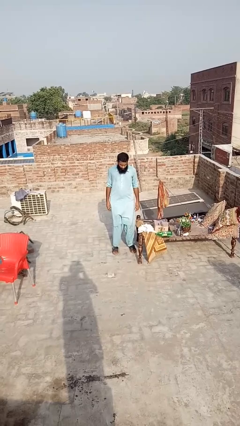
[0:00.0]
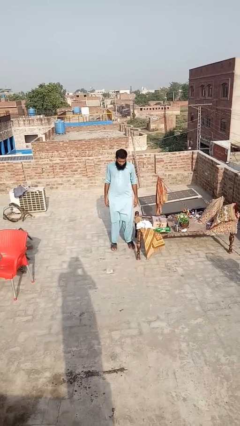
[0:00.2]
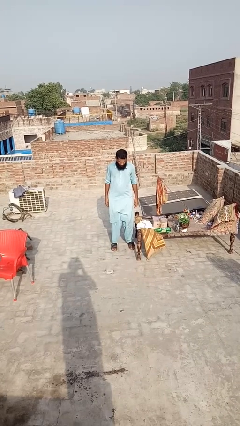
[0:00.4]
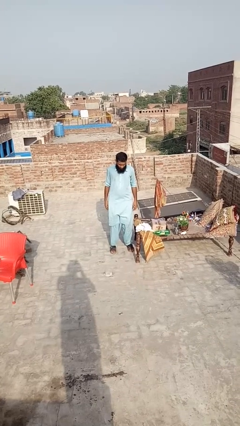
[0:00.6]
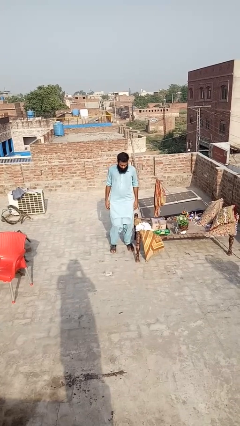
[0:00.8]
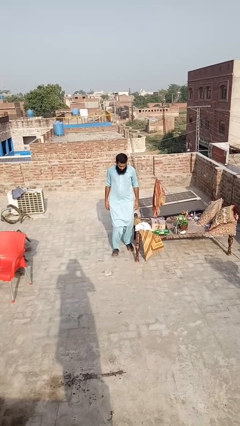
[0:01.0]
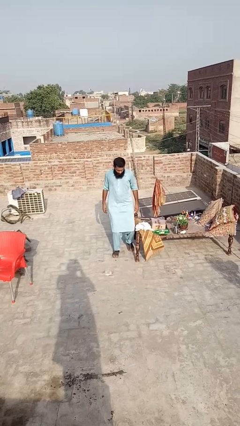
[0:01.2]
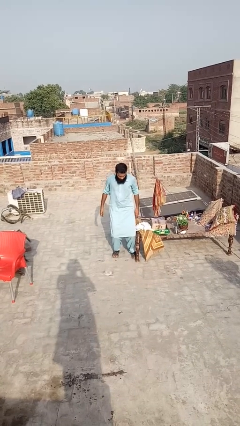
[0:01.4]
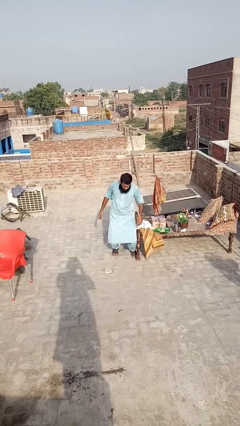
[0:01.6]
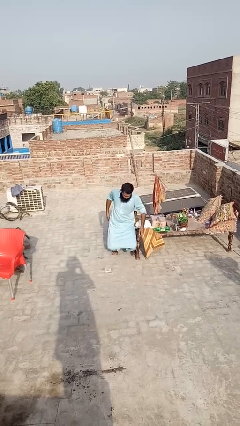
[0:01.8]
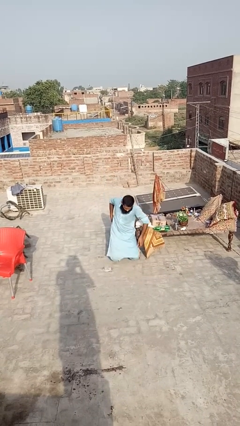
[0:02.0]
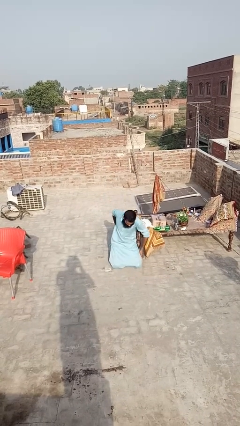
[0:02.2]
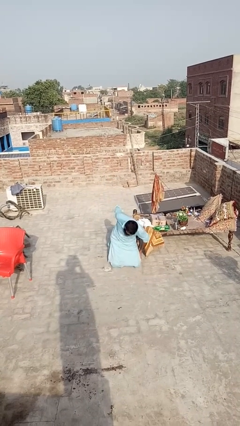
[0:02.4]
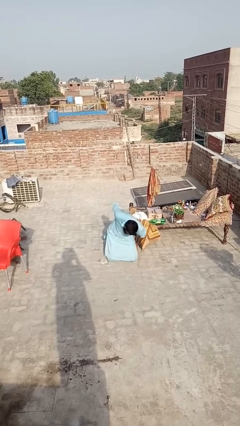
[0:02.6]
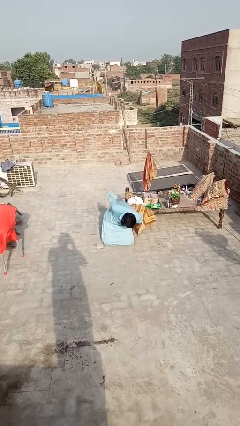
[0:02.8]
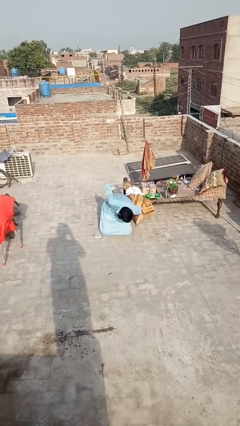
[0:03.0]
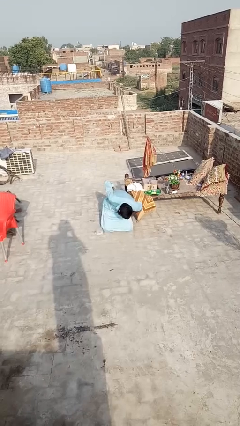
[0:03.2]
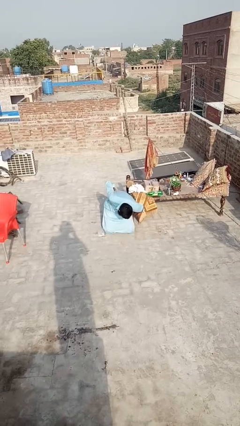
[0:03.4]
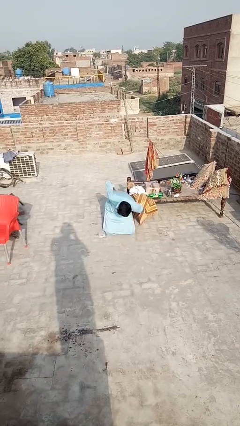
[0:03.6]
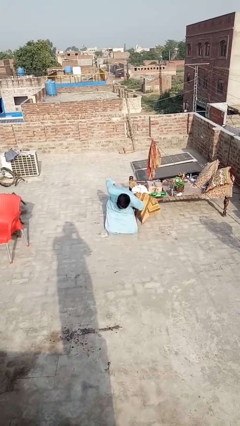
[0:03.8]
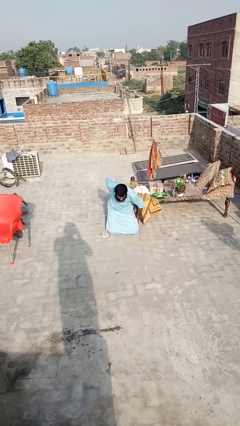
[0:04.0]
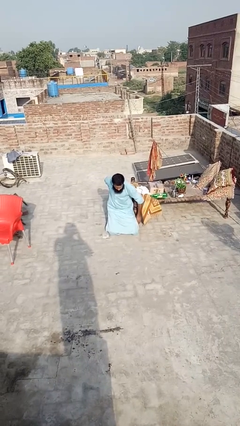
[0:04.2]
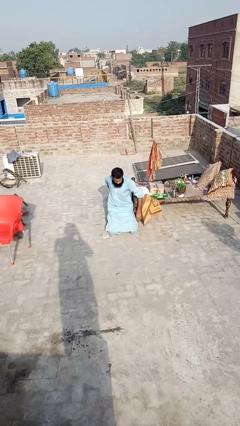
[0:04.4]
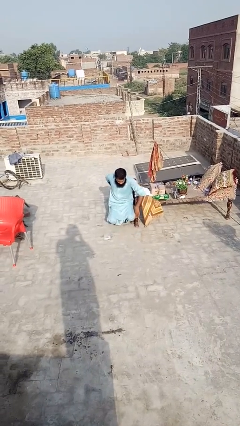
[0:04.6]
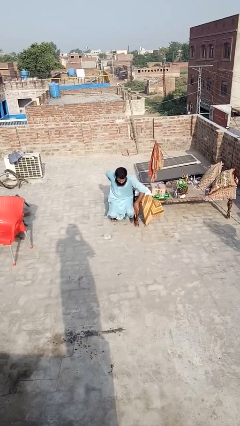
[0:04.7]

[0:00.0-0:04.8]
person bumps into table

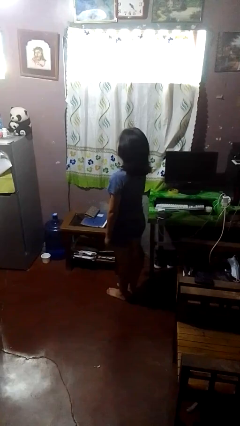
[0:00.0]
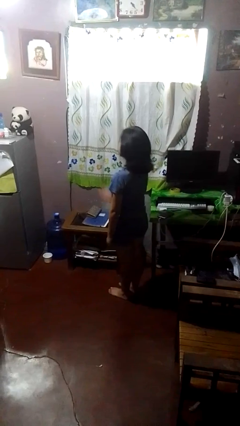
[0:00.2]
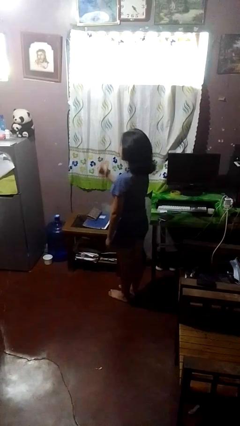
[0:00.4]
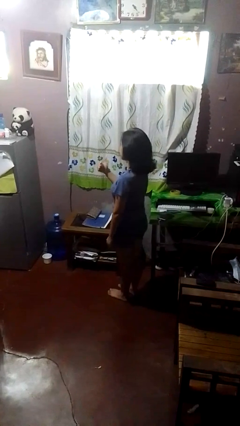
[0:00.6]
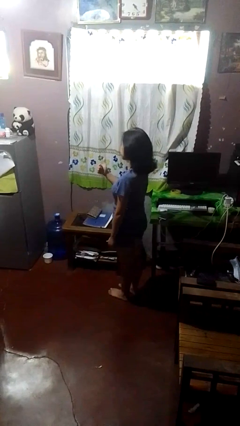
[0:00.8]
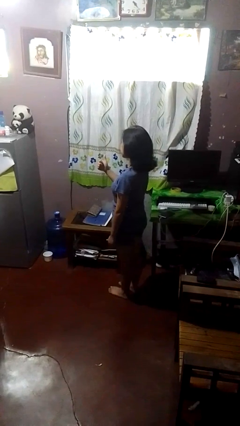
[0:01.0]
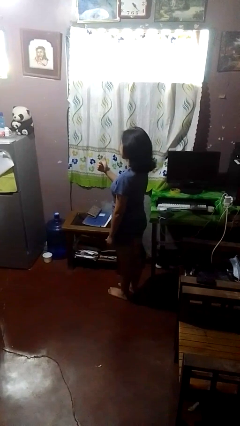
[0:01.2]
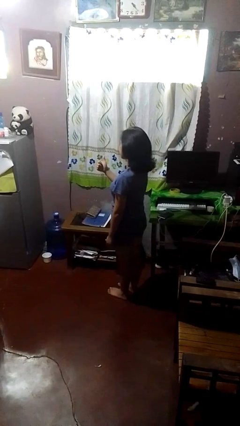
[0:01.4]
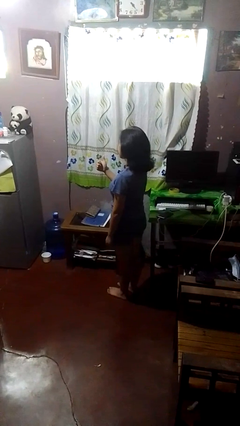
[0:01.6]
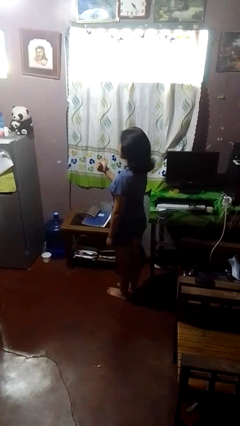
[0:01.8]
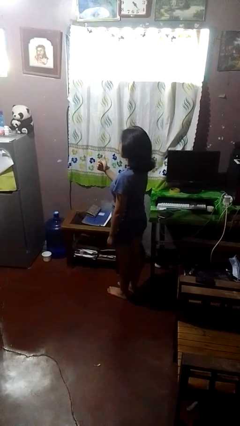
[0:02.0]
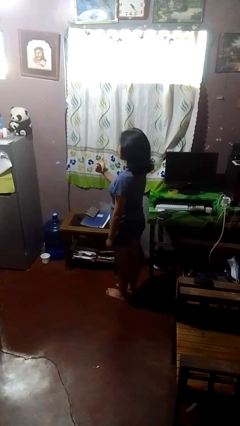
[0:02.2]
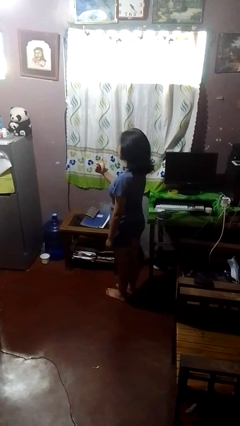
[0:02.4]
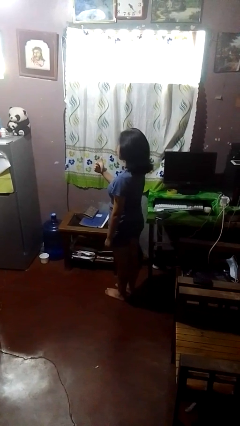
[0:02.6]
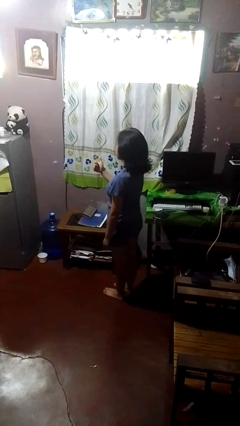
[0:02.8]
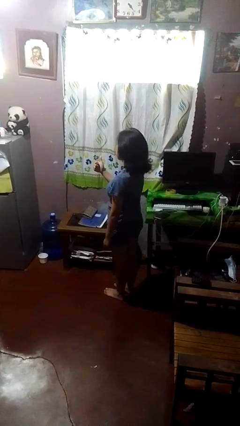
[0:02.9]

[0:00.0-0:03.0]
person gestures thumbs up

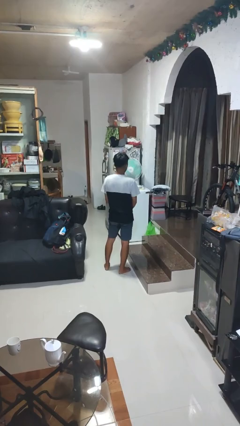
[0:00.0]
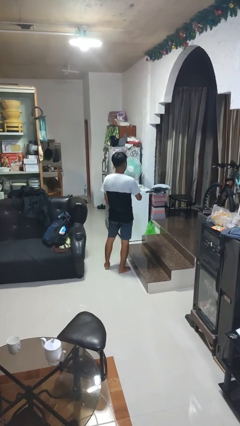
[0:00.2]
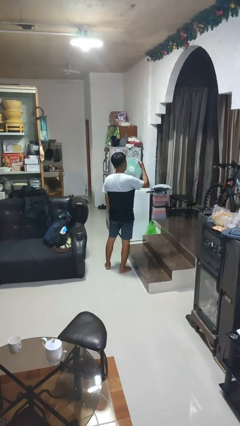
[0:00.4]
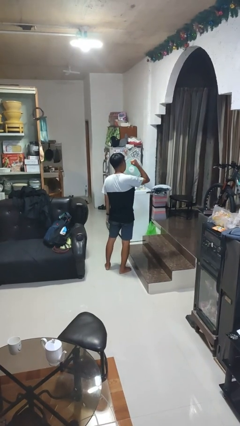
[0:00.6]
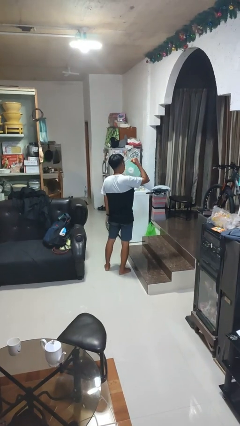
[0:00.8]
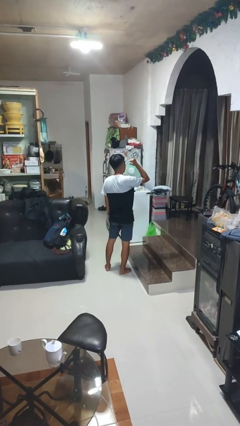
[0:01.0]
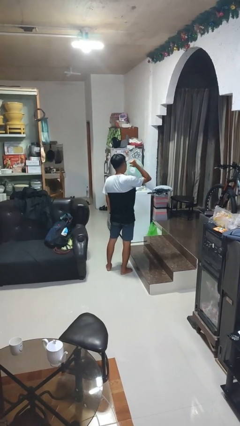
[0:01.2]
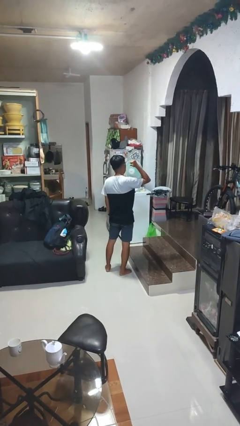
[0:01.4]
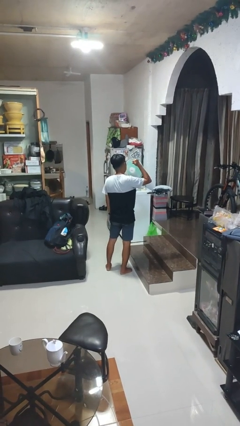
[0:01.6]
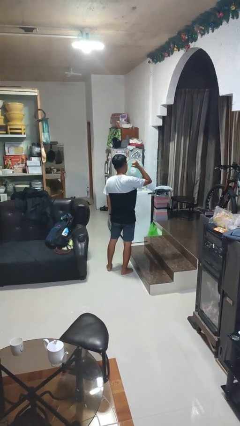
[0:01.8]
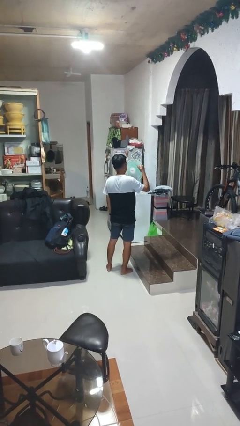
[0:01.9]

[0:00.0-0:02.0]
person gestures behind me

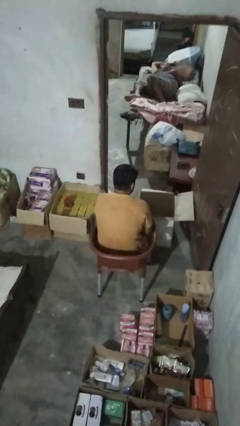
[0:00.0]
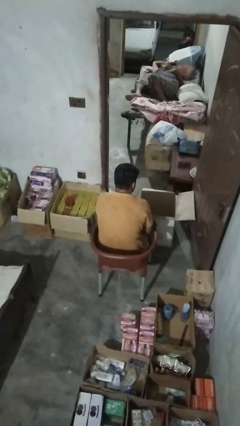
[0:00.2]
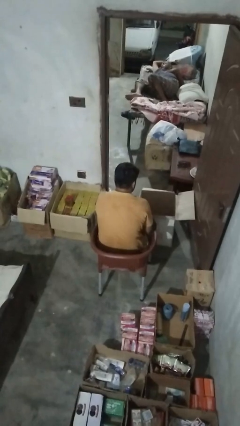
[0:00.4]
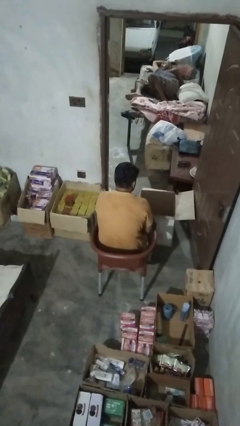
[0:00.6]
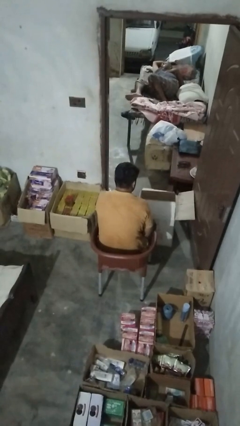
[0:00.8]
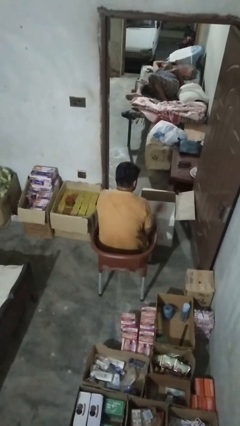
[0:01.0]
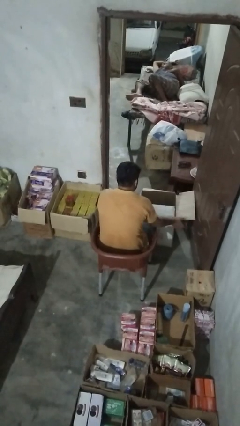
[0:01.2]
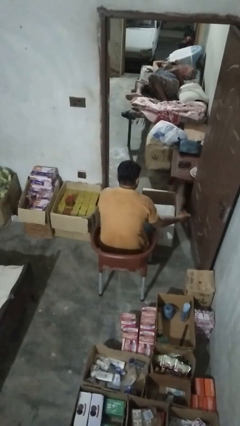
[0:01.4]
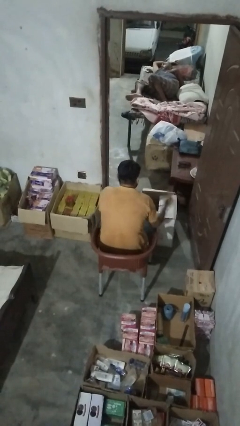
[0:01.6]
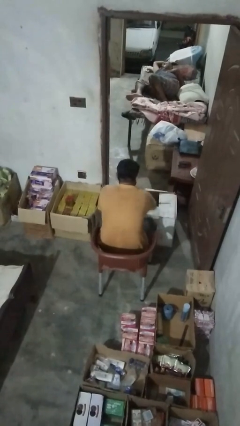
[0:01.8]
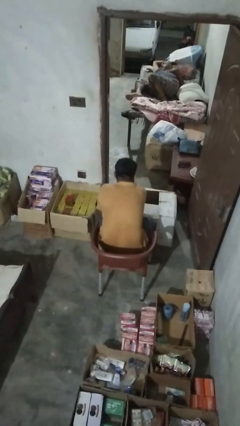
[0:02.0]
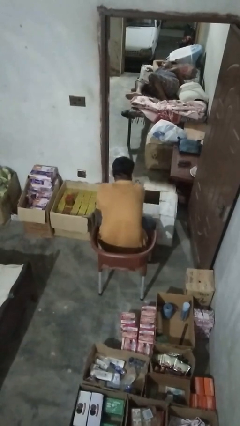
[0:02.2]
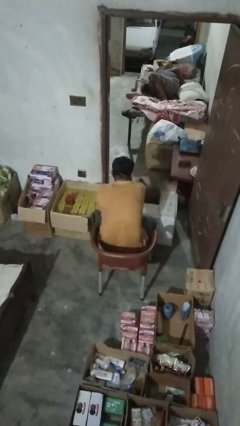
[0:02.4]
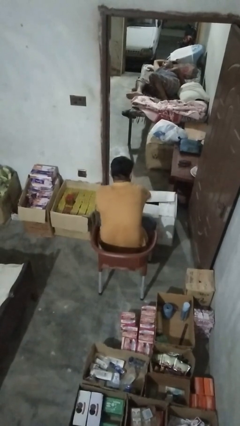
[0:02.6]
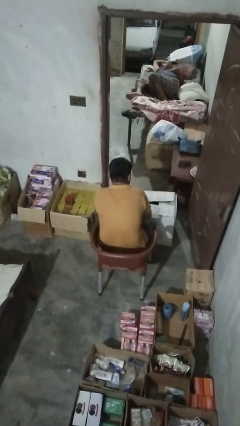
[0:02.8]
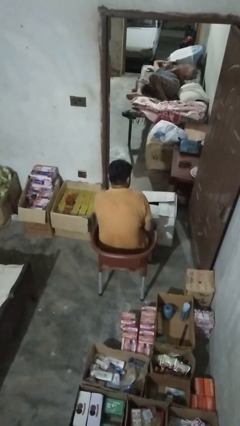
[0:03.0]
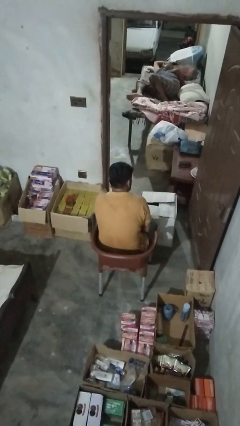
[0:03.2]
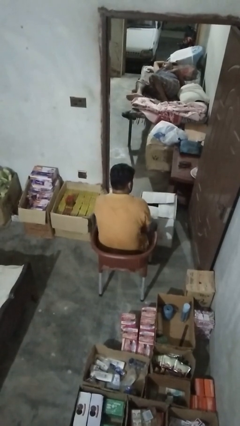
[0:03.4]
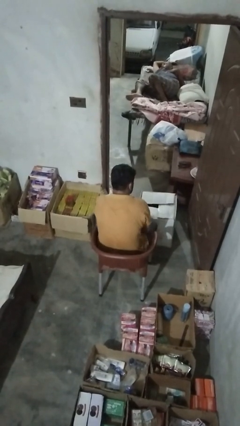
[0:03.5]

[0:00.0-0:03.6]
person opens box

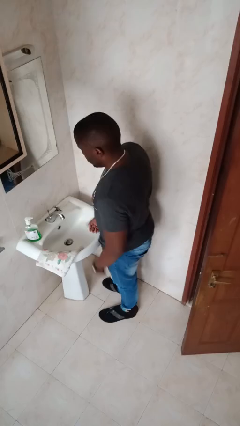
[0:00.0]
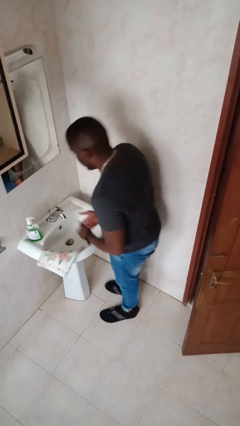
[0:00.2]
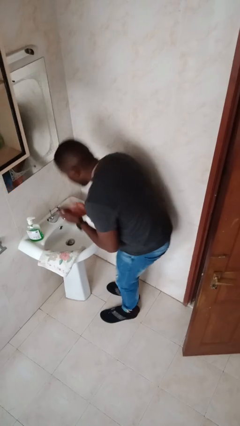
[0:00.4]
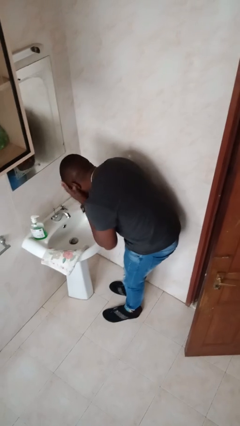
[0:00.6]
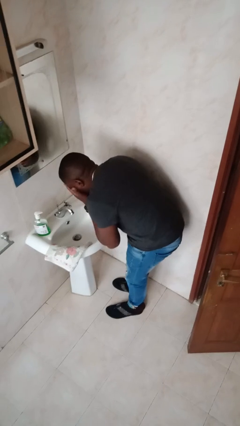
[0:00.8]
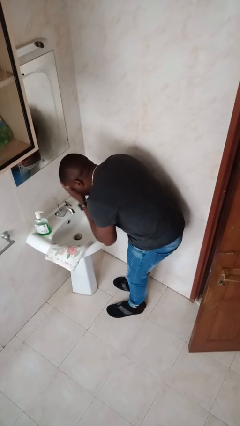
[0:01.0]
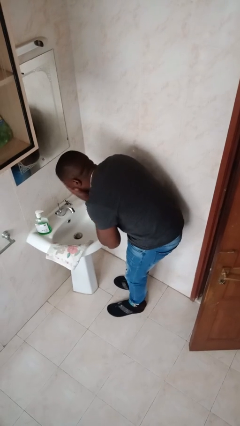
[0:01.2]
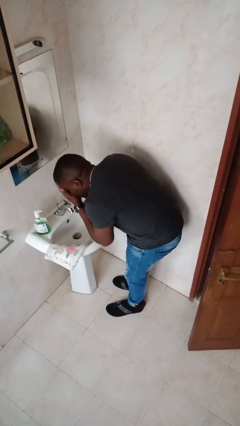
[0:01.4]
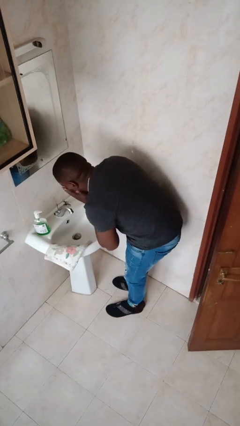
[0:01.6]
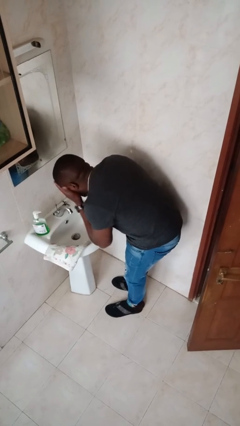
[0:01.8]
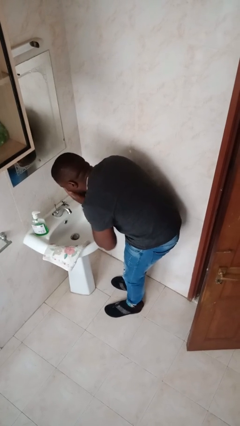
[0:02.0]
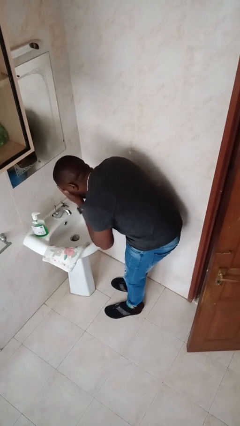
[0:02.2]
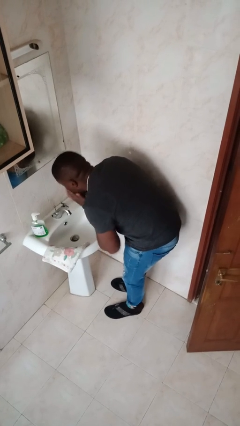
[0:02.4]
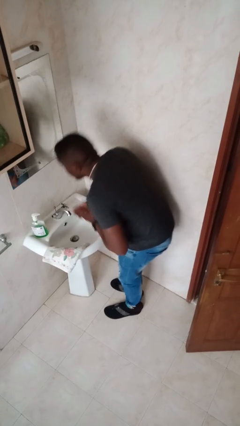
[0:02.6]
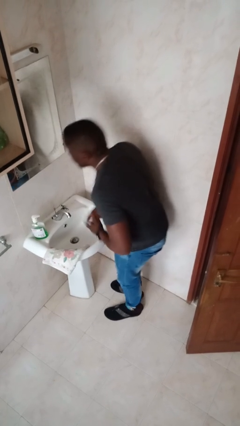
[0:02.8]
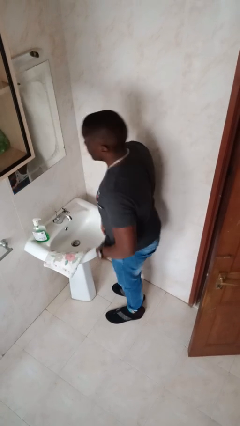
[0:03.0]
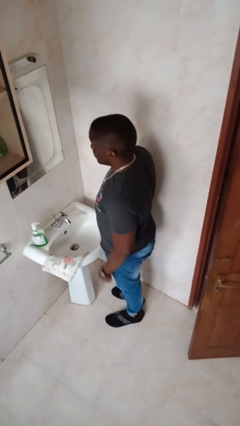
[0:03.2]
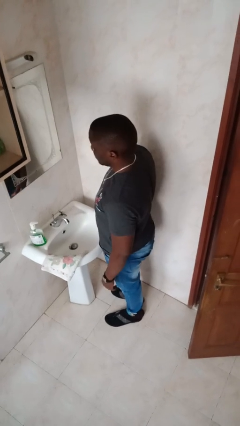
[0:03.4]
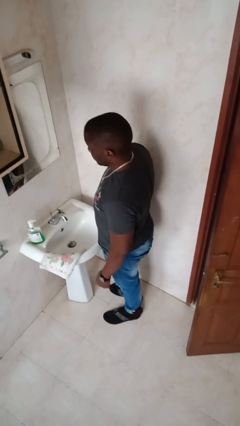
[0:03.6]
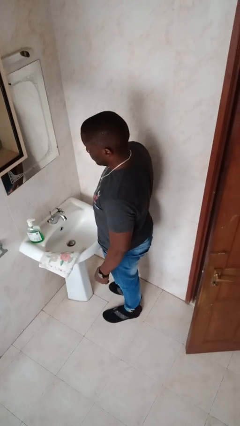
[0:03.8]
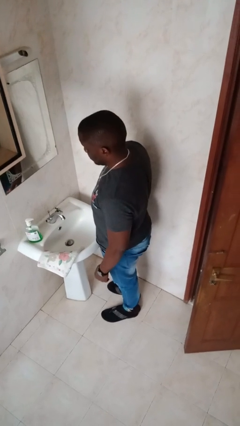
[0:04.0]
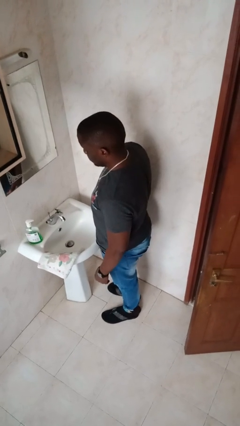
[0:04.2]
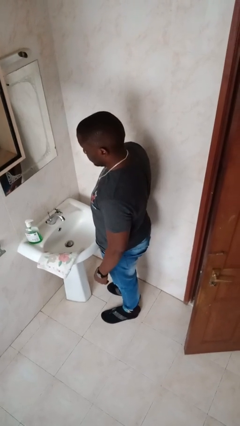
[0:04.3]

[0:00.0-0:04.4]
person washes face
